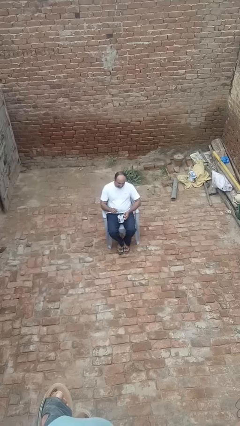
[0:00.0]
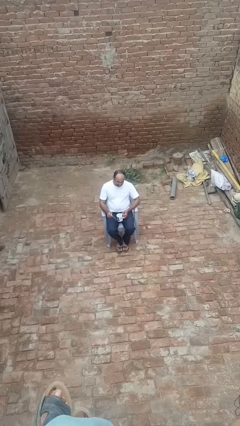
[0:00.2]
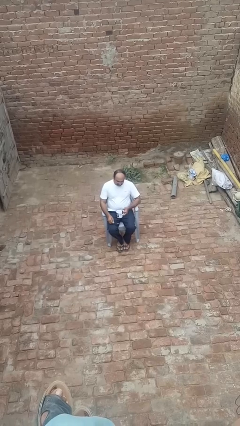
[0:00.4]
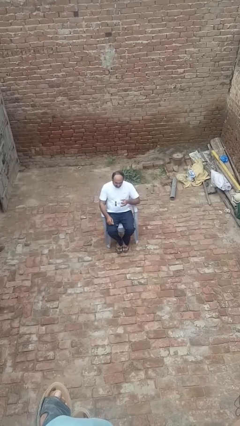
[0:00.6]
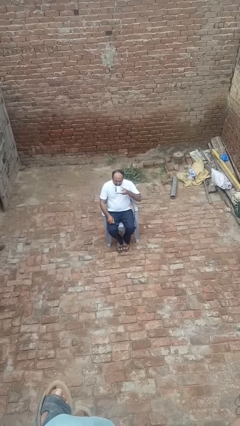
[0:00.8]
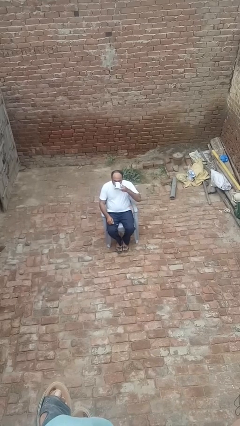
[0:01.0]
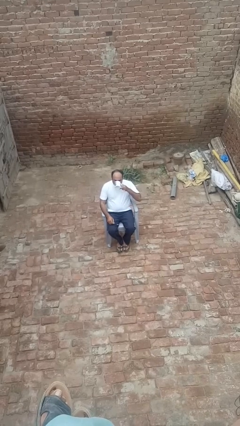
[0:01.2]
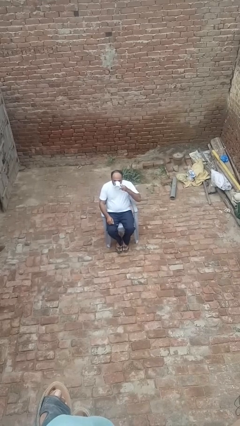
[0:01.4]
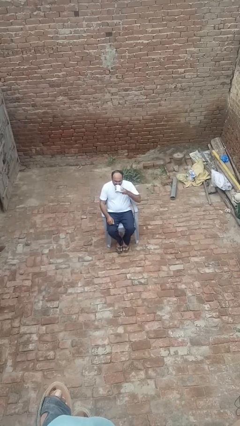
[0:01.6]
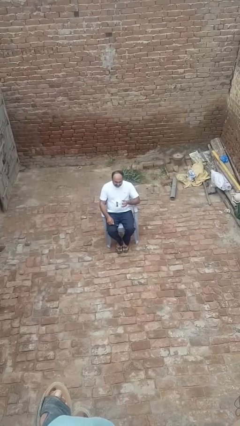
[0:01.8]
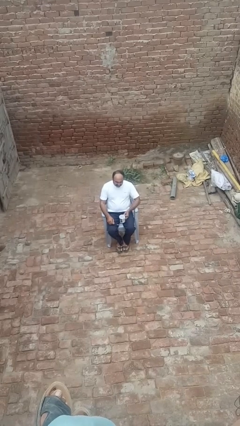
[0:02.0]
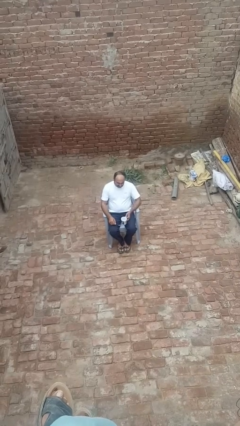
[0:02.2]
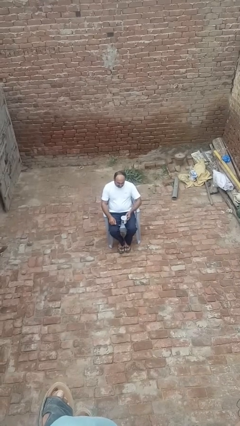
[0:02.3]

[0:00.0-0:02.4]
person drinks from mug

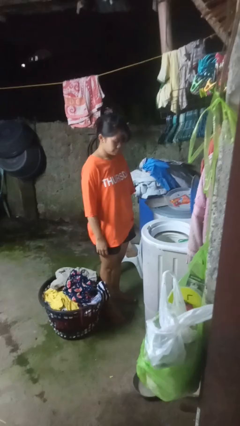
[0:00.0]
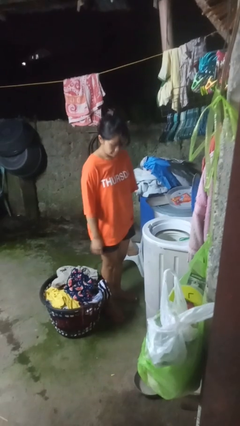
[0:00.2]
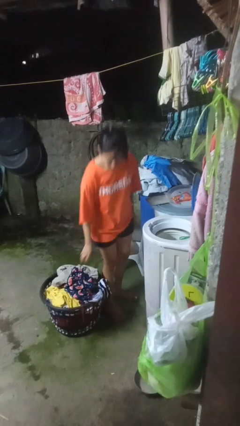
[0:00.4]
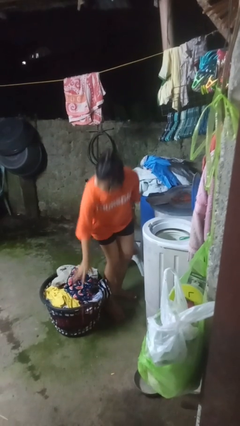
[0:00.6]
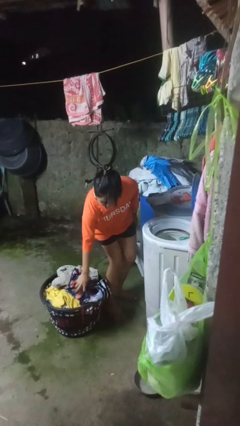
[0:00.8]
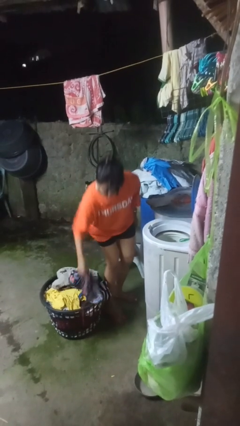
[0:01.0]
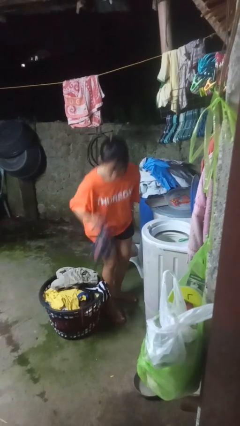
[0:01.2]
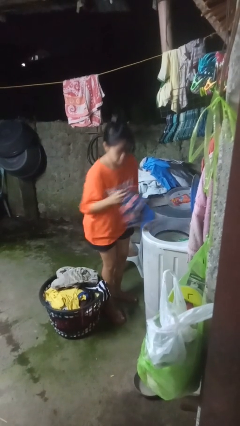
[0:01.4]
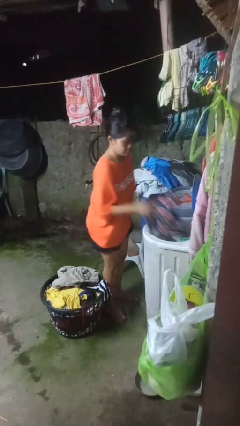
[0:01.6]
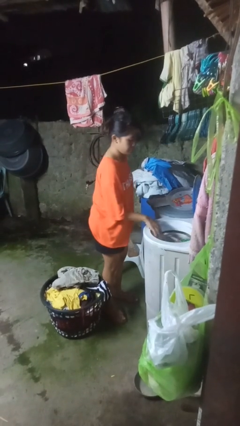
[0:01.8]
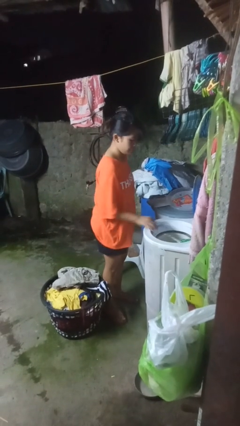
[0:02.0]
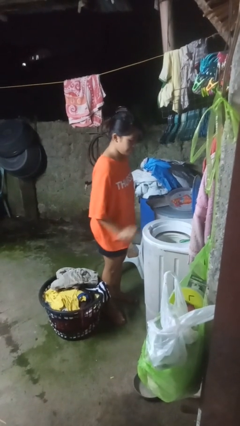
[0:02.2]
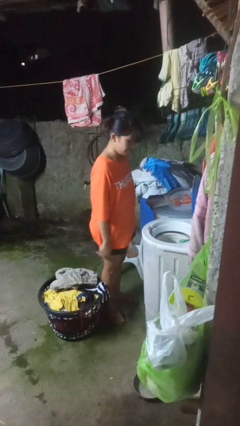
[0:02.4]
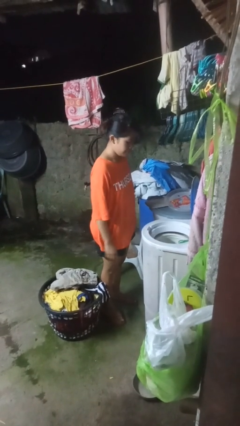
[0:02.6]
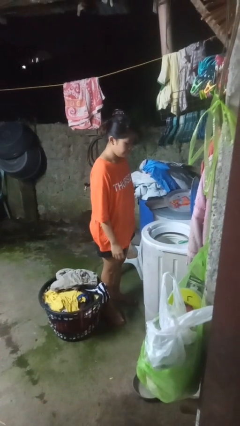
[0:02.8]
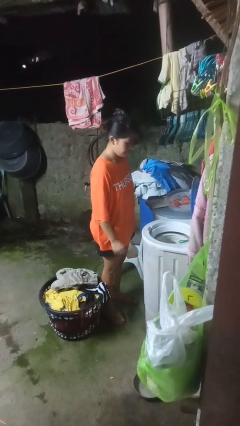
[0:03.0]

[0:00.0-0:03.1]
person loads dryer

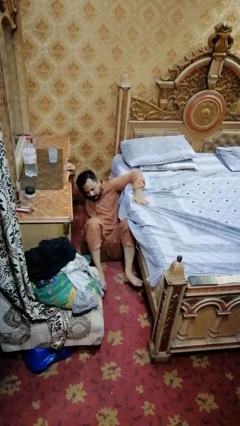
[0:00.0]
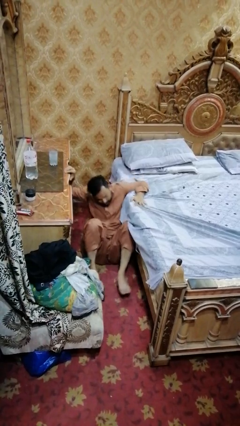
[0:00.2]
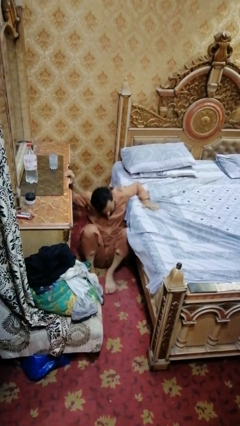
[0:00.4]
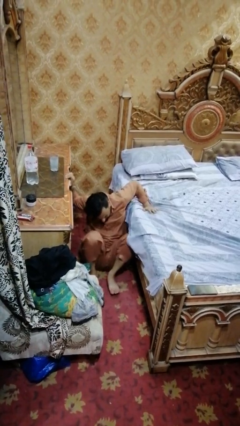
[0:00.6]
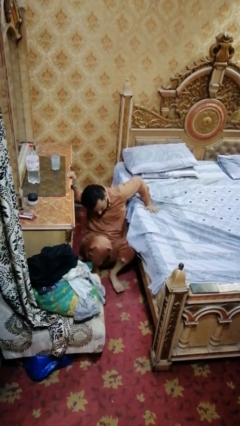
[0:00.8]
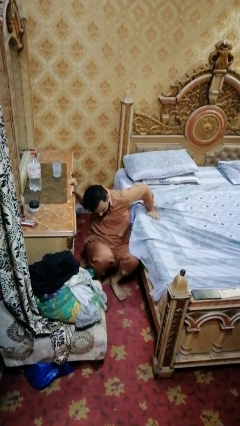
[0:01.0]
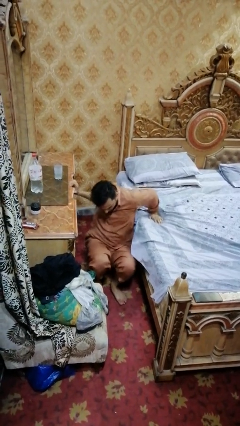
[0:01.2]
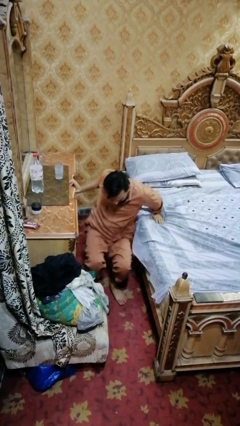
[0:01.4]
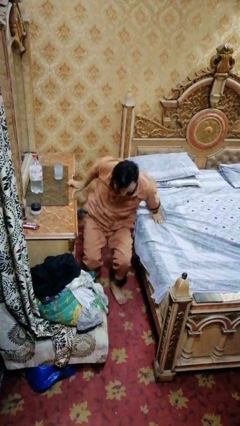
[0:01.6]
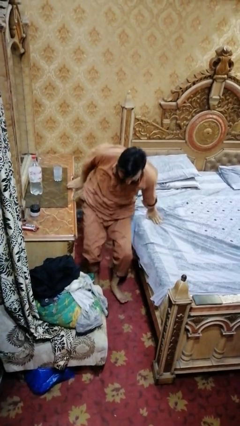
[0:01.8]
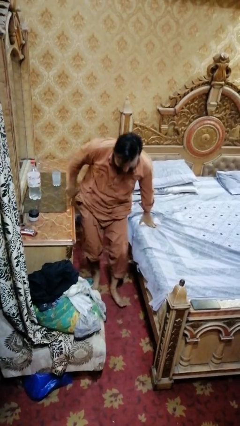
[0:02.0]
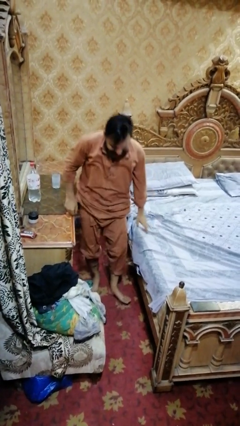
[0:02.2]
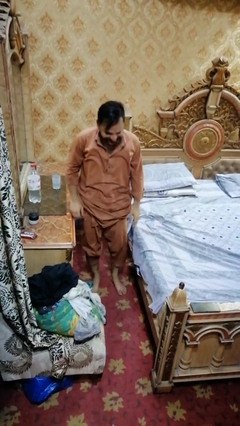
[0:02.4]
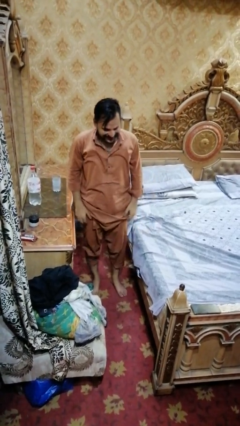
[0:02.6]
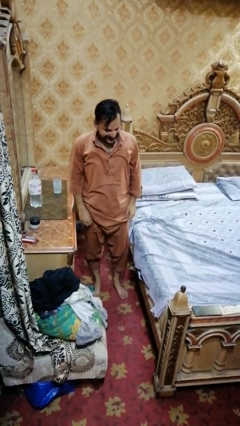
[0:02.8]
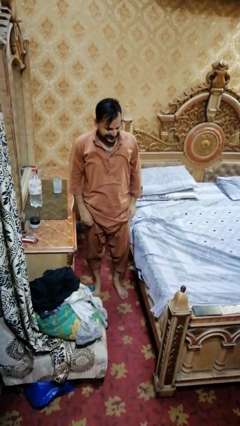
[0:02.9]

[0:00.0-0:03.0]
person stands up from floor

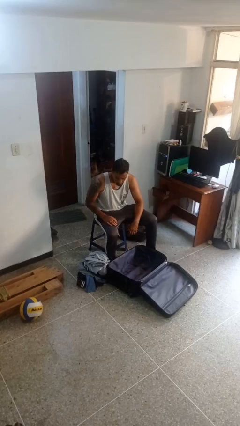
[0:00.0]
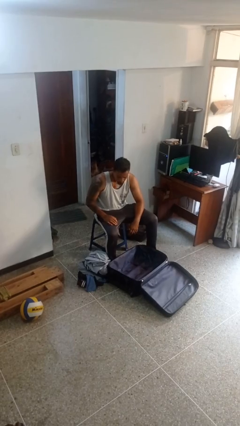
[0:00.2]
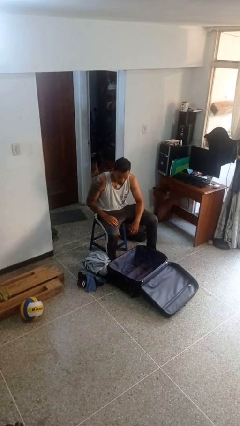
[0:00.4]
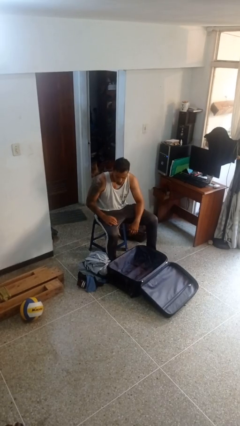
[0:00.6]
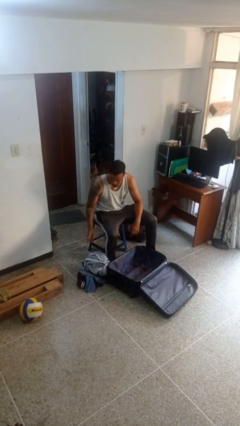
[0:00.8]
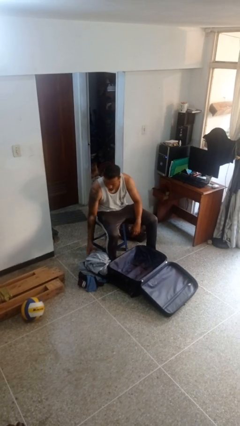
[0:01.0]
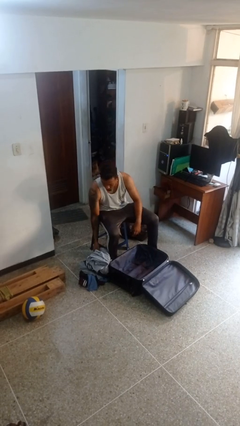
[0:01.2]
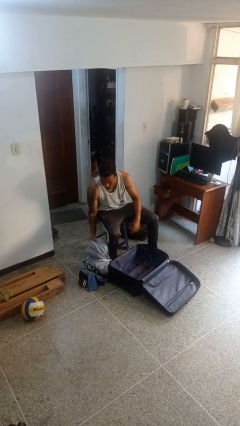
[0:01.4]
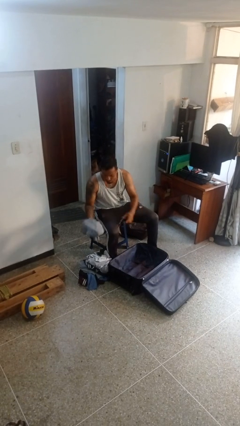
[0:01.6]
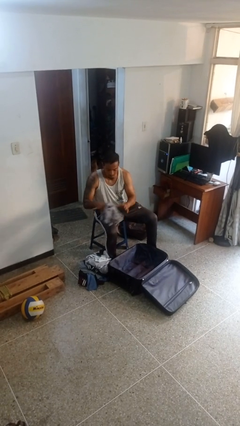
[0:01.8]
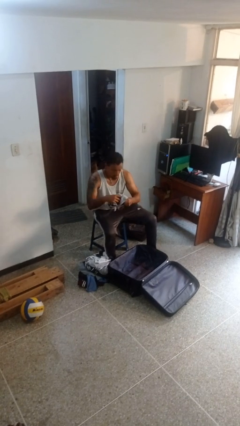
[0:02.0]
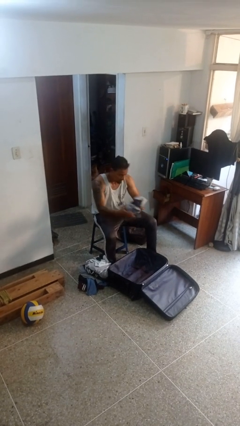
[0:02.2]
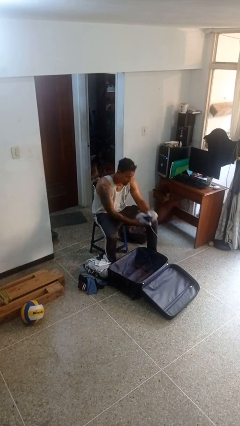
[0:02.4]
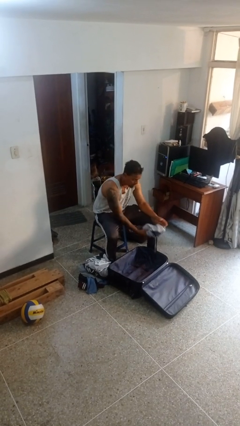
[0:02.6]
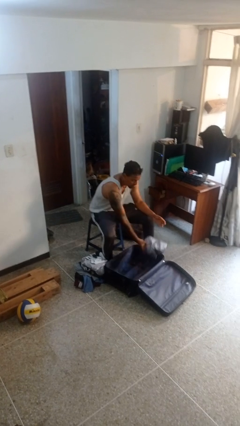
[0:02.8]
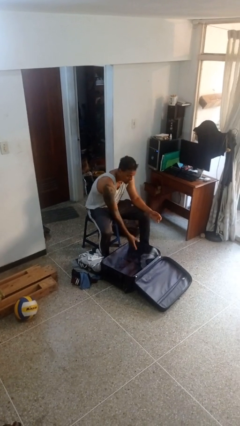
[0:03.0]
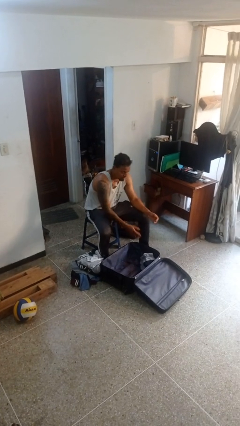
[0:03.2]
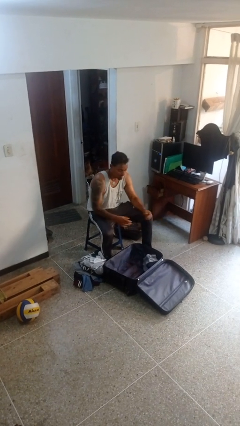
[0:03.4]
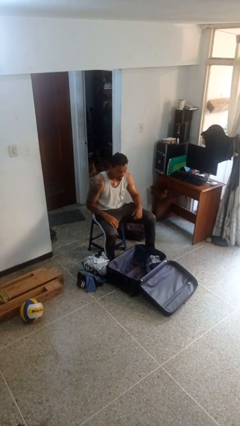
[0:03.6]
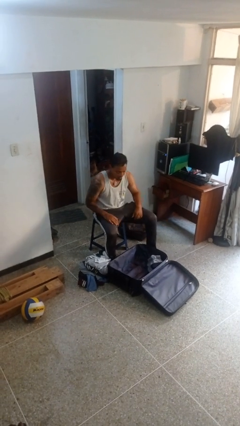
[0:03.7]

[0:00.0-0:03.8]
person loads clothes into suitcase

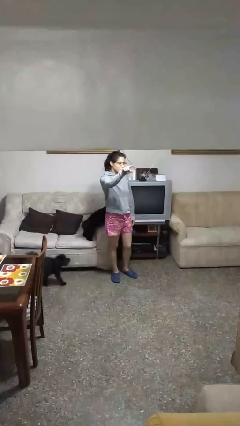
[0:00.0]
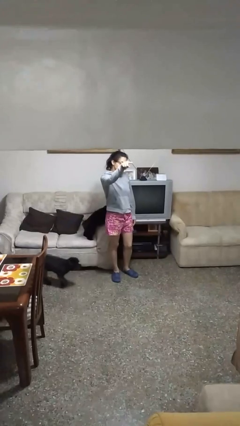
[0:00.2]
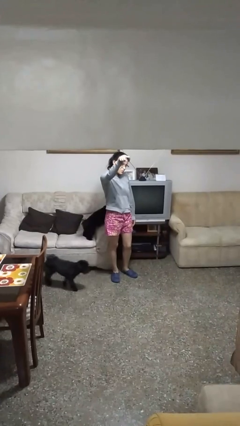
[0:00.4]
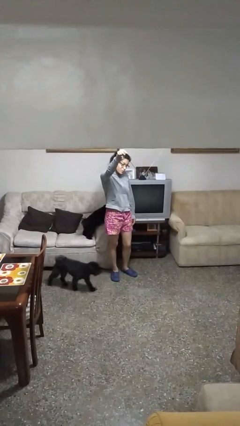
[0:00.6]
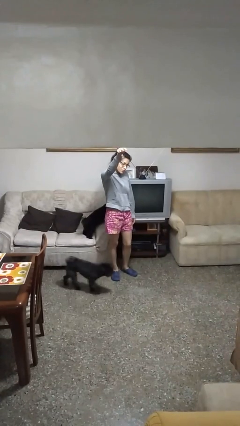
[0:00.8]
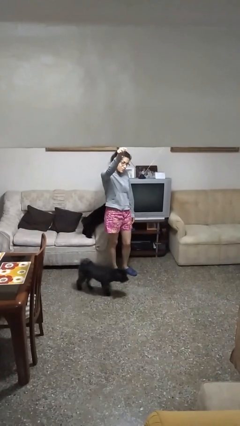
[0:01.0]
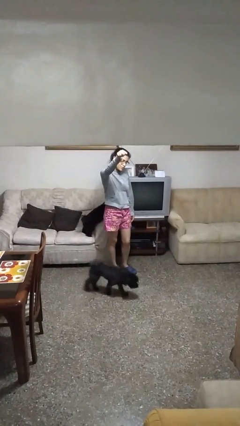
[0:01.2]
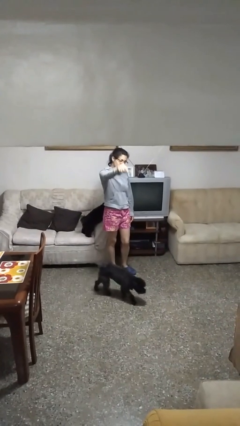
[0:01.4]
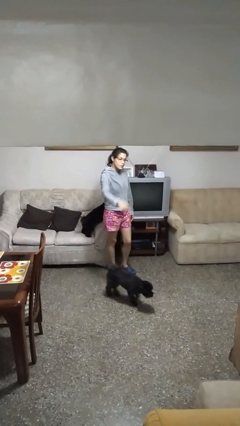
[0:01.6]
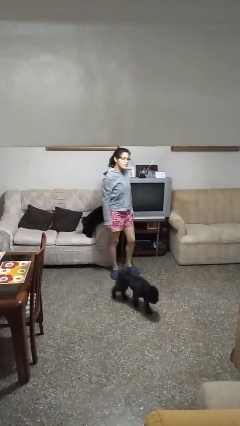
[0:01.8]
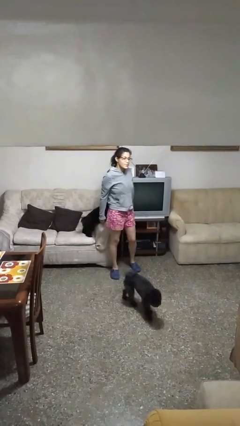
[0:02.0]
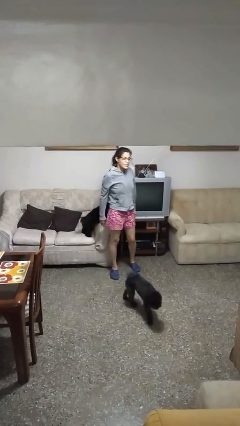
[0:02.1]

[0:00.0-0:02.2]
person points at person

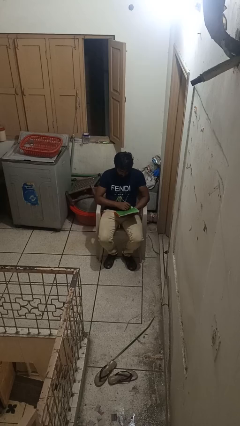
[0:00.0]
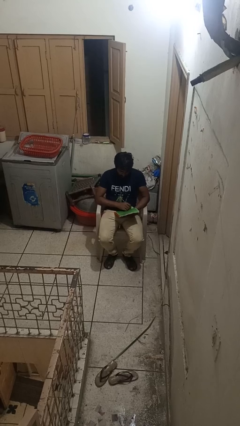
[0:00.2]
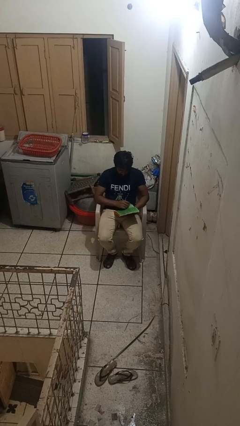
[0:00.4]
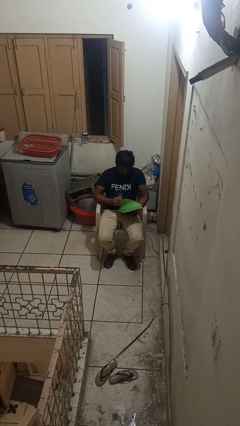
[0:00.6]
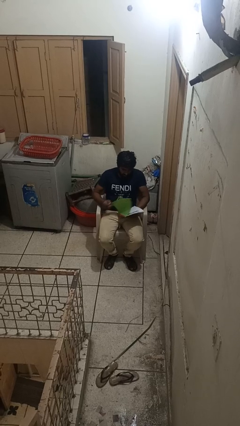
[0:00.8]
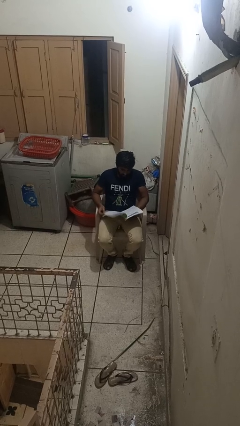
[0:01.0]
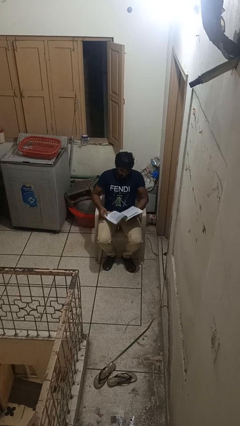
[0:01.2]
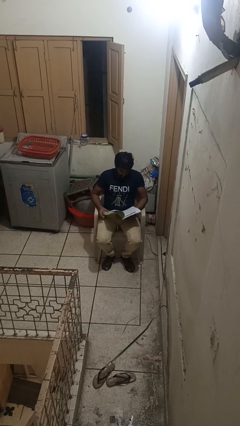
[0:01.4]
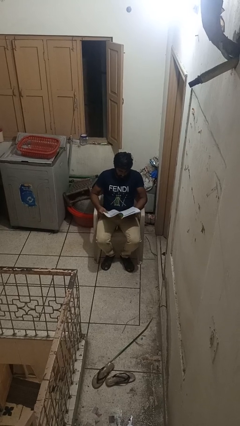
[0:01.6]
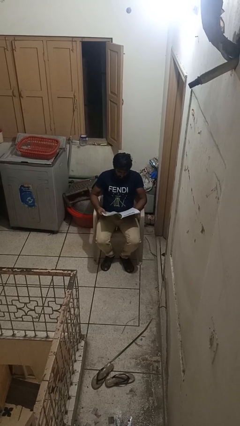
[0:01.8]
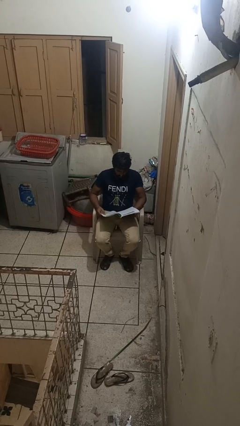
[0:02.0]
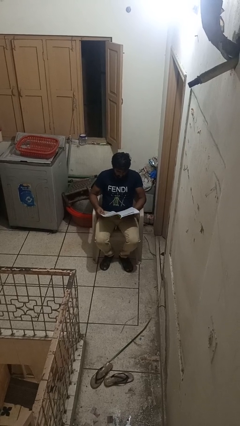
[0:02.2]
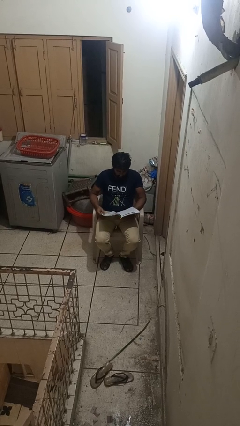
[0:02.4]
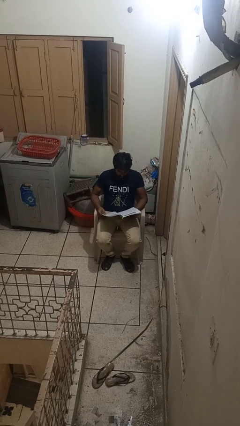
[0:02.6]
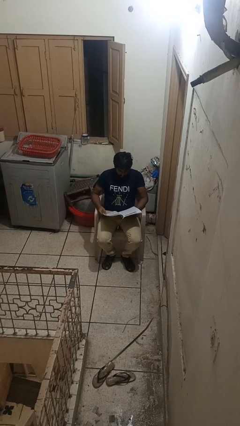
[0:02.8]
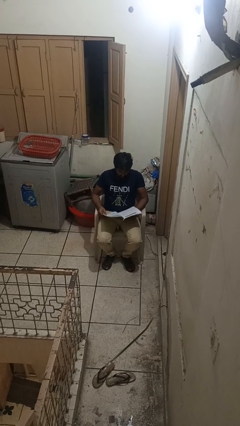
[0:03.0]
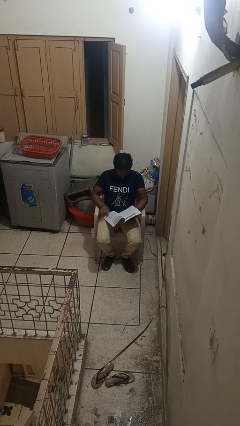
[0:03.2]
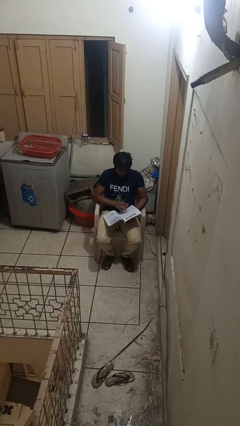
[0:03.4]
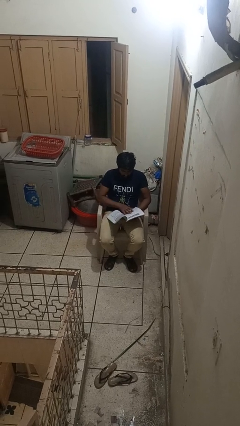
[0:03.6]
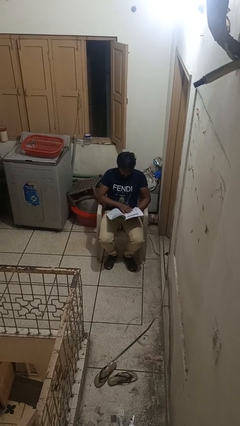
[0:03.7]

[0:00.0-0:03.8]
person reads magazine
